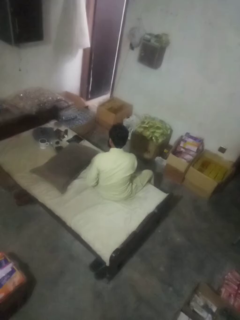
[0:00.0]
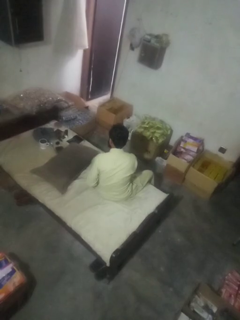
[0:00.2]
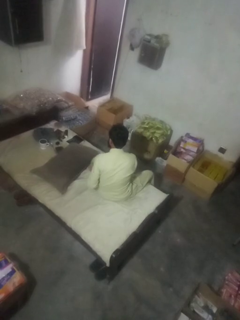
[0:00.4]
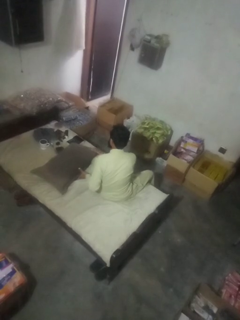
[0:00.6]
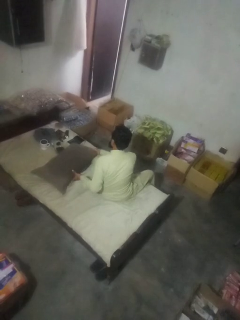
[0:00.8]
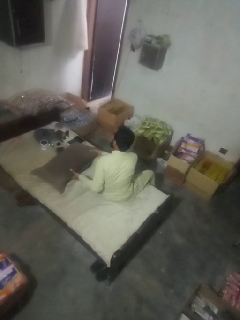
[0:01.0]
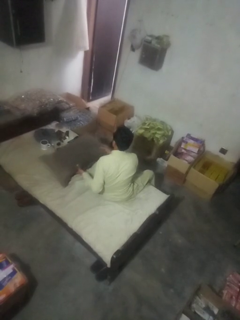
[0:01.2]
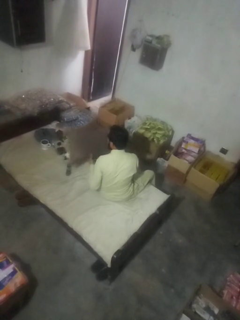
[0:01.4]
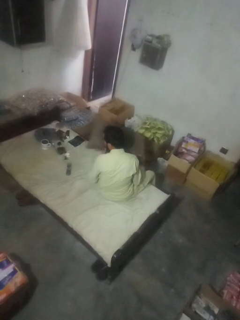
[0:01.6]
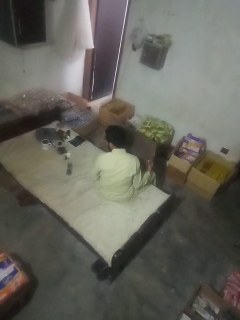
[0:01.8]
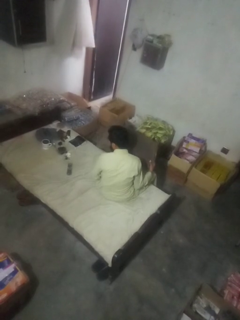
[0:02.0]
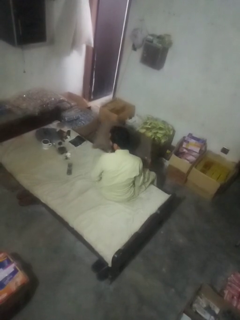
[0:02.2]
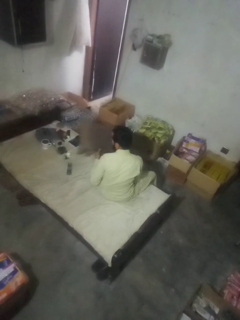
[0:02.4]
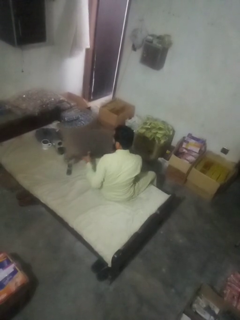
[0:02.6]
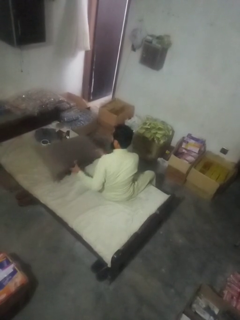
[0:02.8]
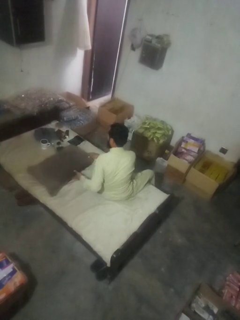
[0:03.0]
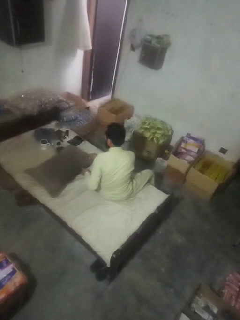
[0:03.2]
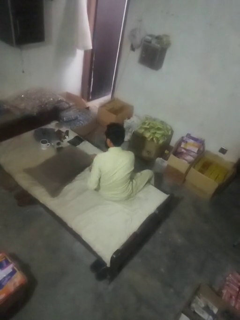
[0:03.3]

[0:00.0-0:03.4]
person searches in couch

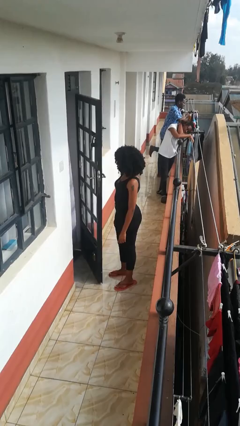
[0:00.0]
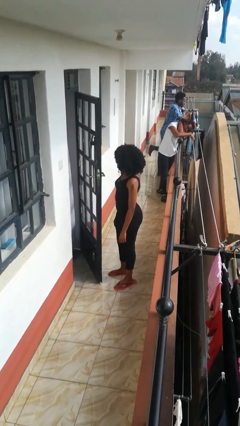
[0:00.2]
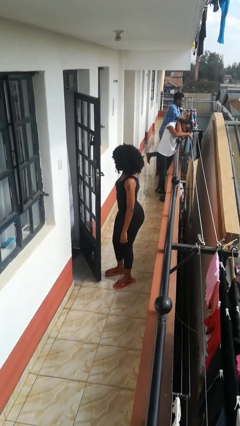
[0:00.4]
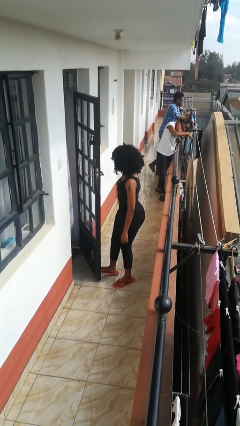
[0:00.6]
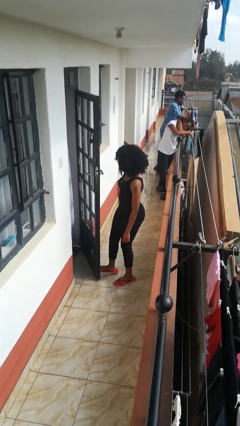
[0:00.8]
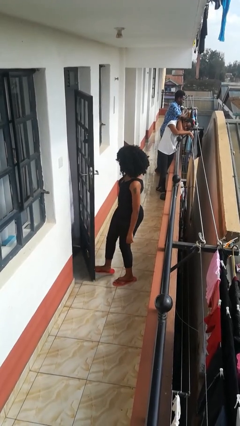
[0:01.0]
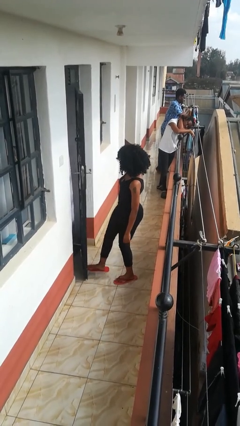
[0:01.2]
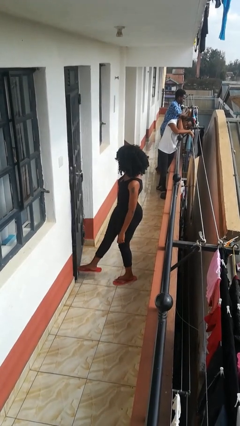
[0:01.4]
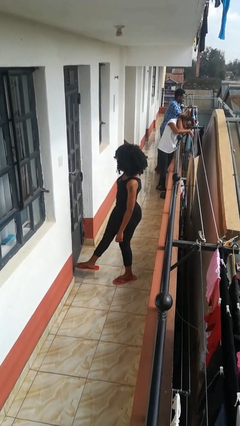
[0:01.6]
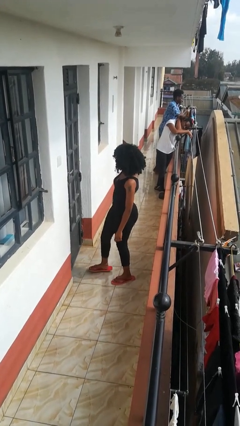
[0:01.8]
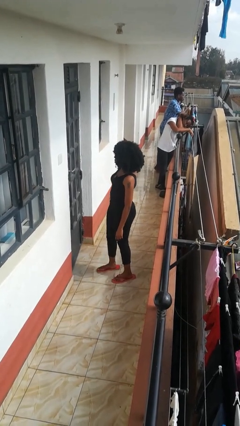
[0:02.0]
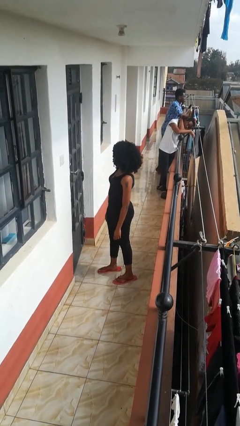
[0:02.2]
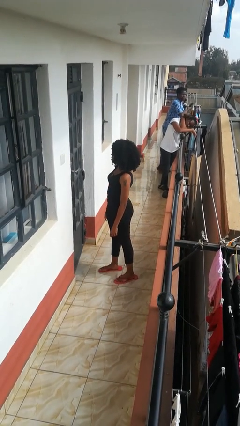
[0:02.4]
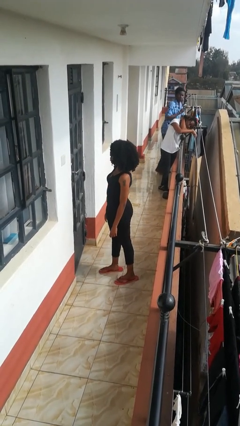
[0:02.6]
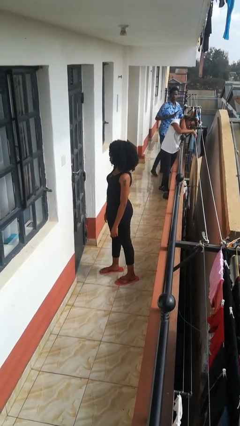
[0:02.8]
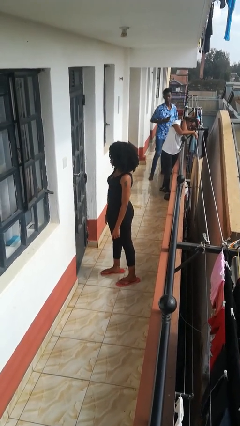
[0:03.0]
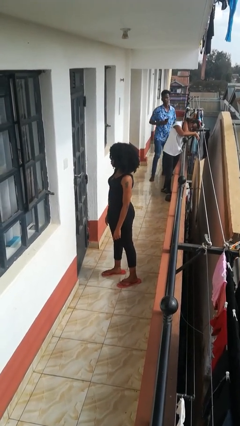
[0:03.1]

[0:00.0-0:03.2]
person closes door with foot

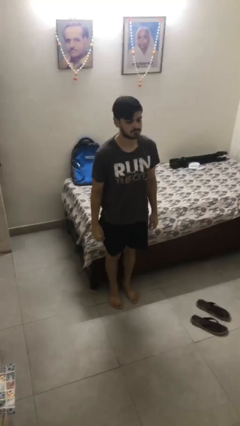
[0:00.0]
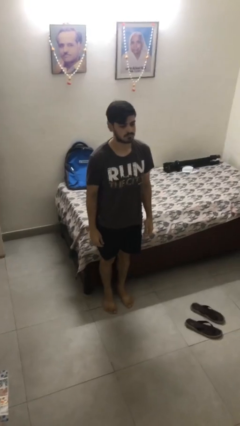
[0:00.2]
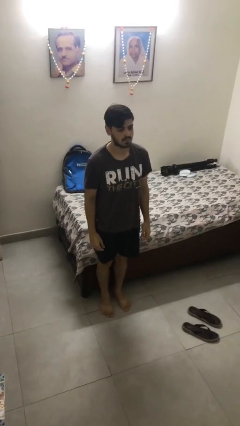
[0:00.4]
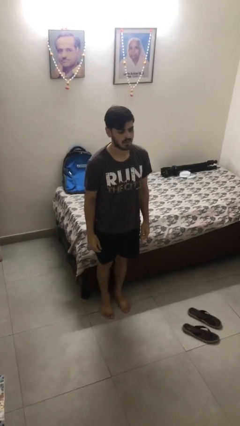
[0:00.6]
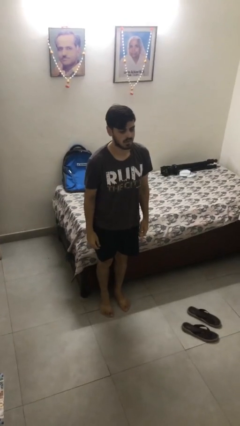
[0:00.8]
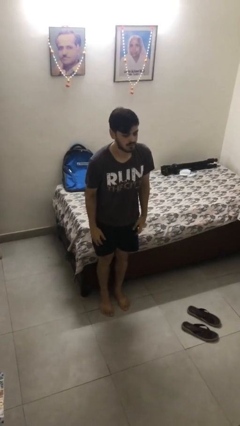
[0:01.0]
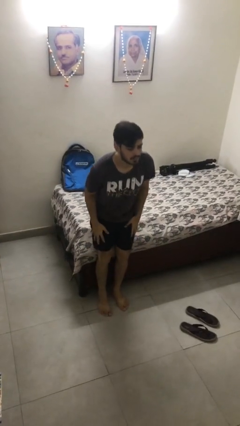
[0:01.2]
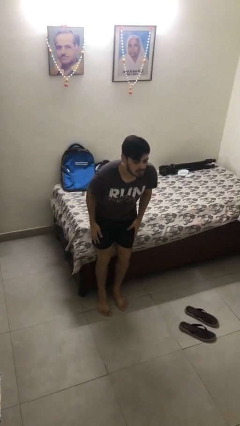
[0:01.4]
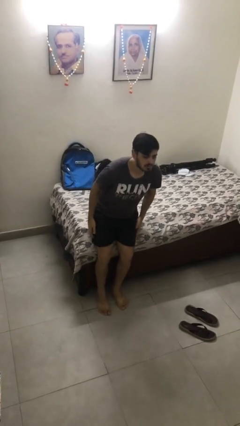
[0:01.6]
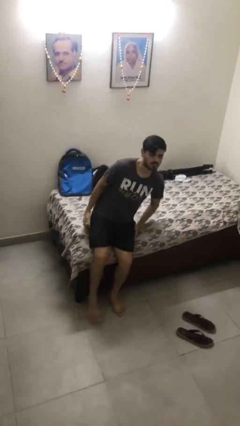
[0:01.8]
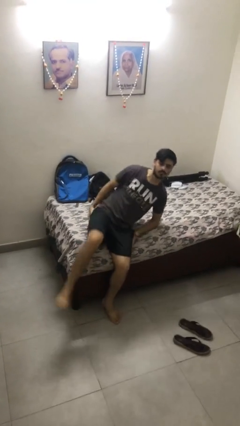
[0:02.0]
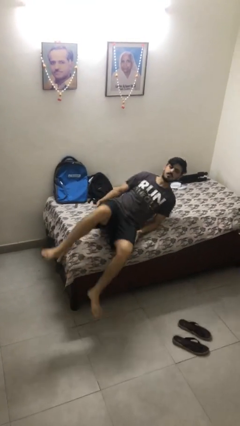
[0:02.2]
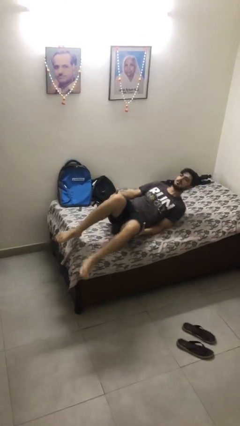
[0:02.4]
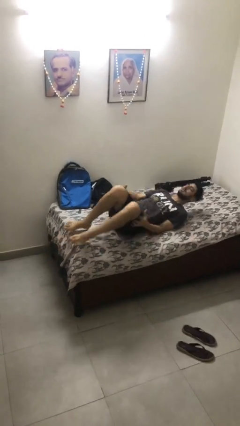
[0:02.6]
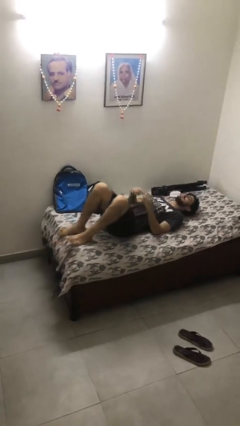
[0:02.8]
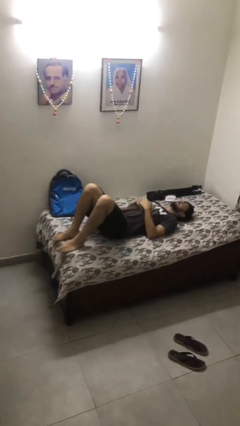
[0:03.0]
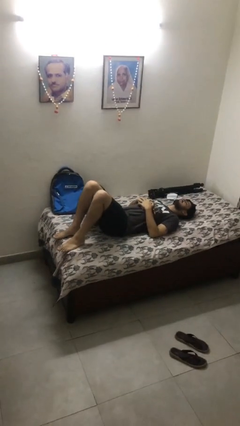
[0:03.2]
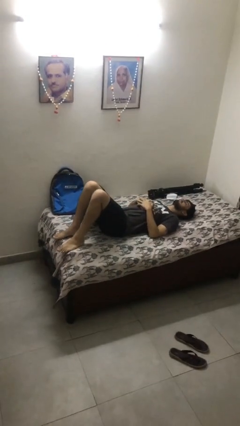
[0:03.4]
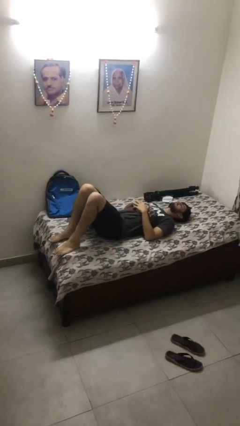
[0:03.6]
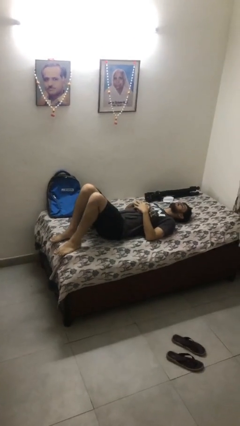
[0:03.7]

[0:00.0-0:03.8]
person lies down on bed

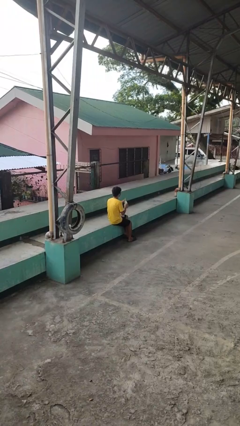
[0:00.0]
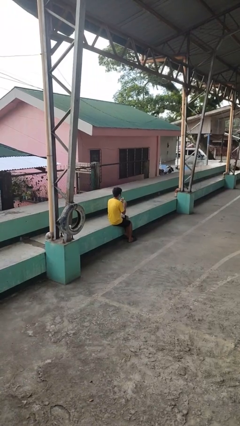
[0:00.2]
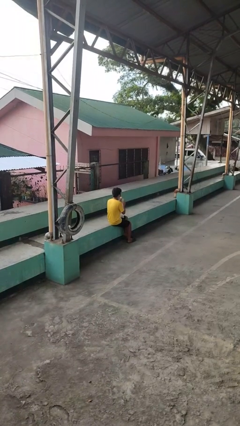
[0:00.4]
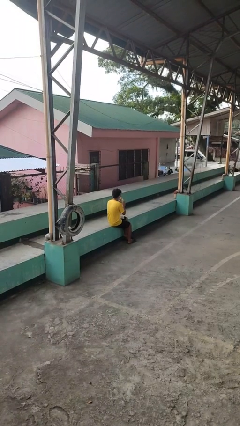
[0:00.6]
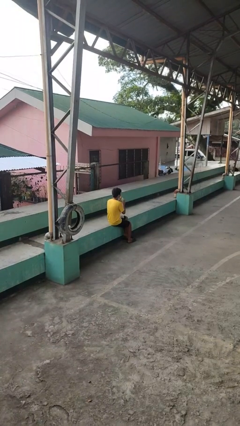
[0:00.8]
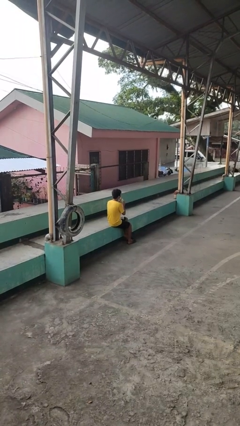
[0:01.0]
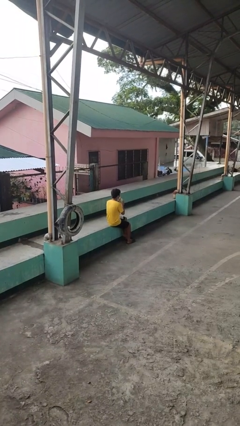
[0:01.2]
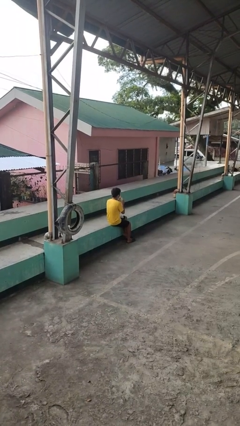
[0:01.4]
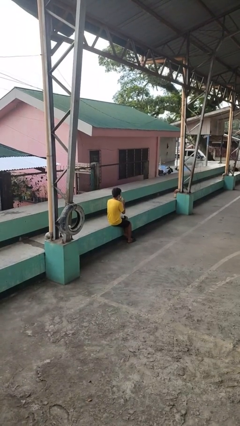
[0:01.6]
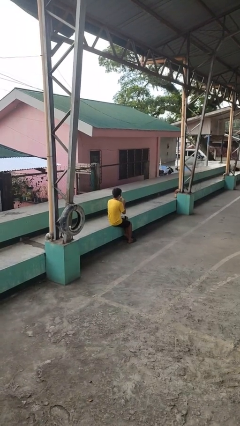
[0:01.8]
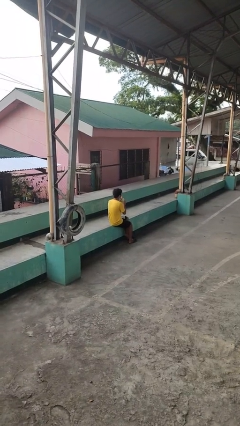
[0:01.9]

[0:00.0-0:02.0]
person drinks from straw

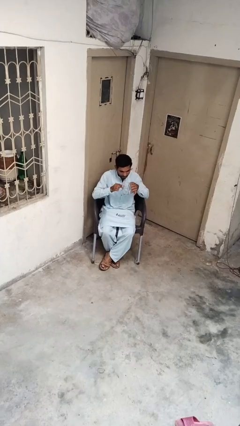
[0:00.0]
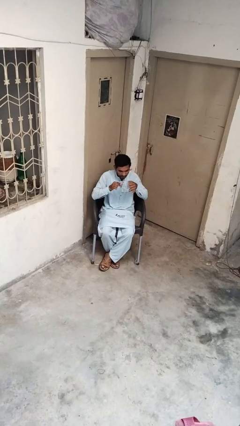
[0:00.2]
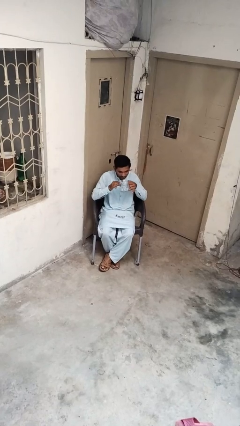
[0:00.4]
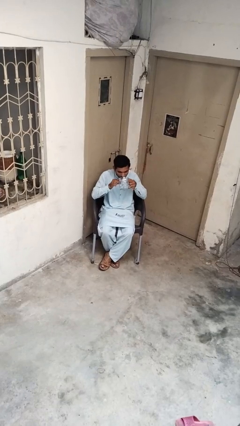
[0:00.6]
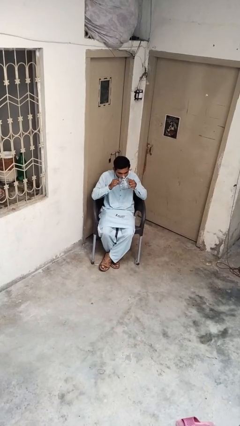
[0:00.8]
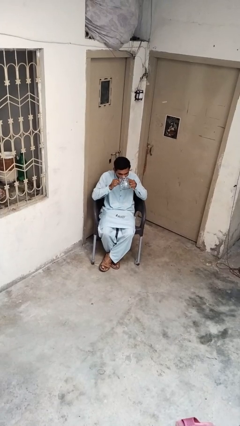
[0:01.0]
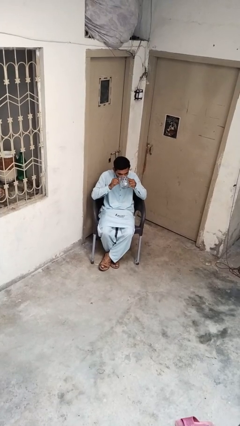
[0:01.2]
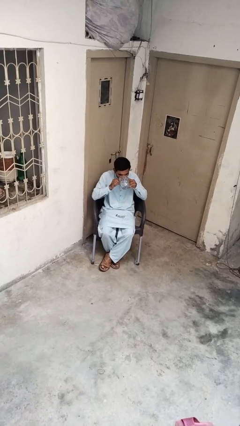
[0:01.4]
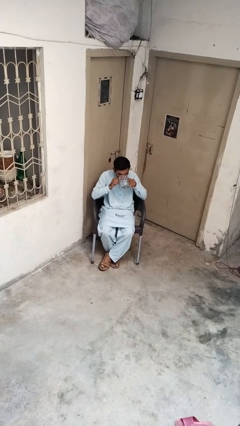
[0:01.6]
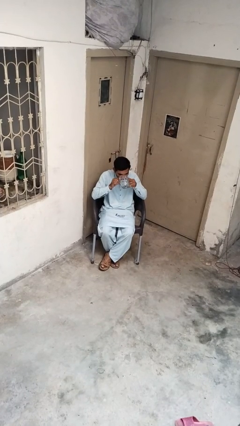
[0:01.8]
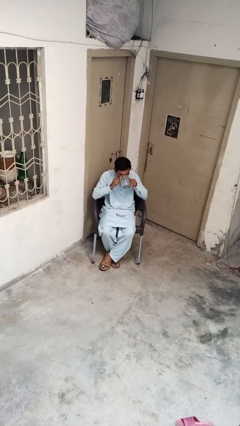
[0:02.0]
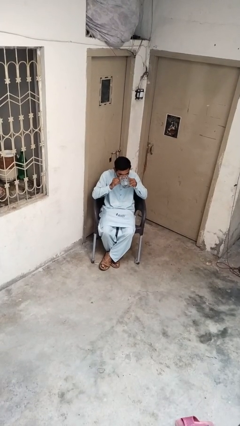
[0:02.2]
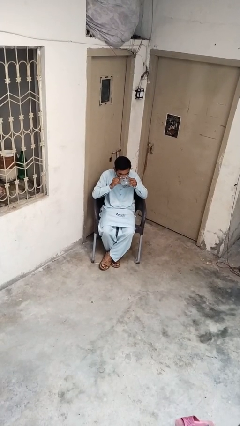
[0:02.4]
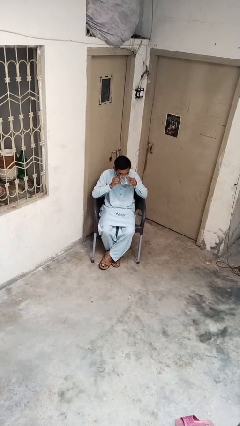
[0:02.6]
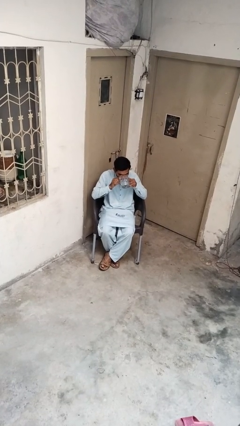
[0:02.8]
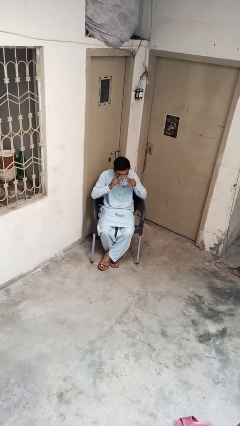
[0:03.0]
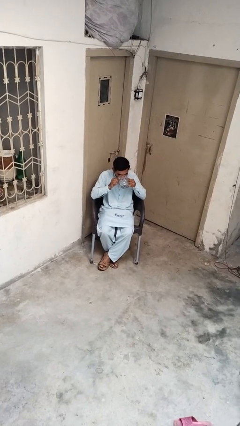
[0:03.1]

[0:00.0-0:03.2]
person drinks from cup

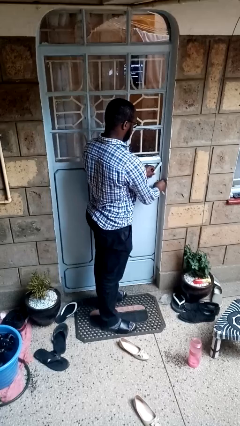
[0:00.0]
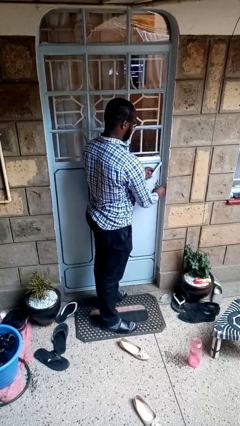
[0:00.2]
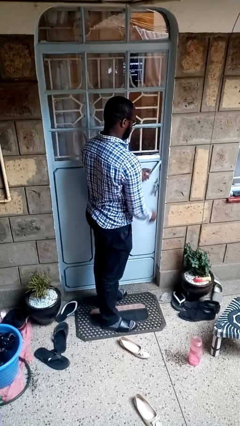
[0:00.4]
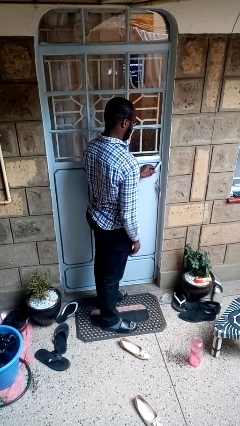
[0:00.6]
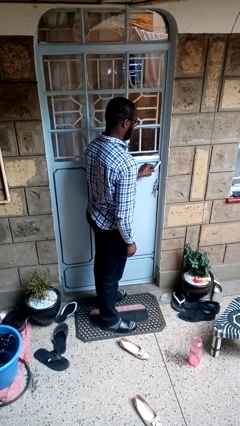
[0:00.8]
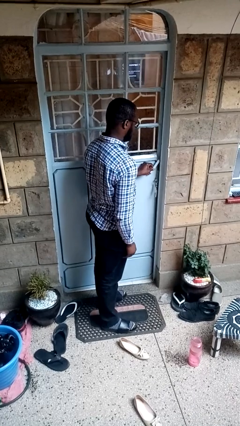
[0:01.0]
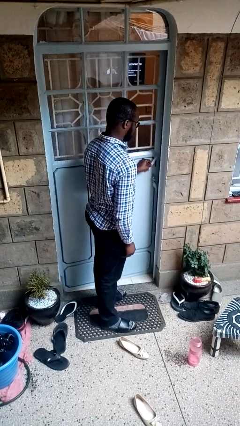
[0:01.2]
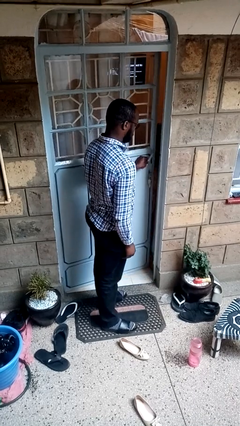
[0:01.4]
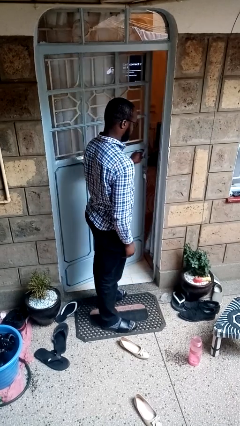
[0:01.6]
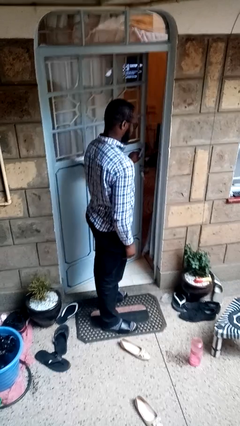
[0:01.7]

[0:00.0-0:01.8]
person opens facility door

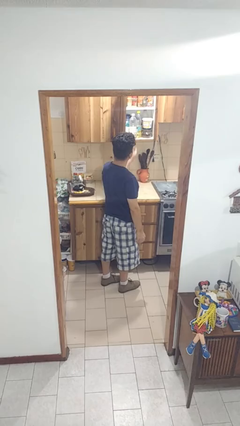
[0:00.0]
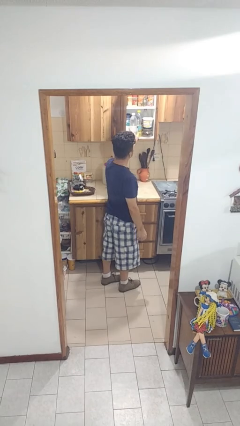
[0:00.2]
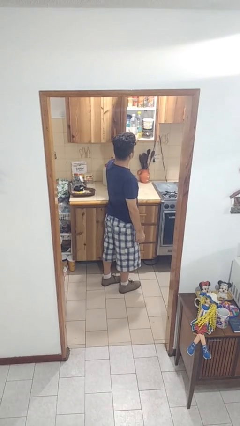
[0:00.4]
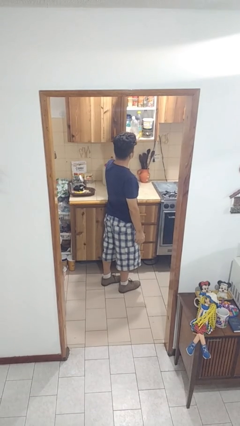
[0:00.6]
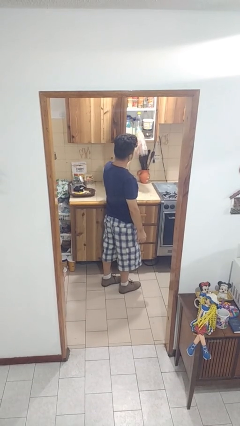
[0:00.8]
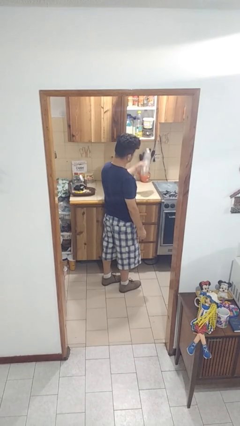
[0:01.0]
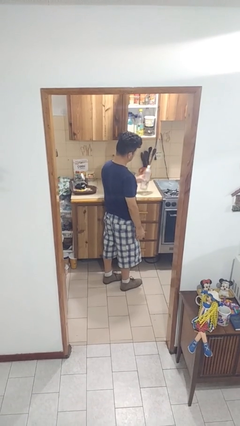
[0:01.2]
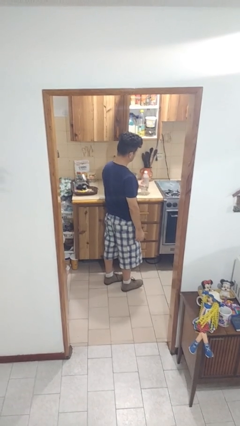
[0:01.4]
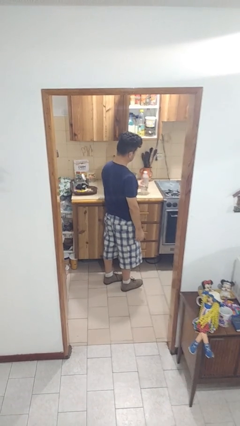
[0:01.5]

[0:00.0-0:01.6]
person takes object from cabinet
